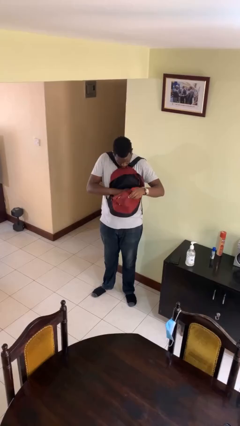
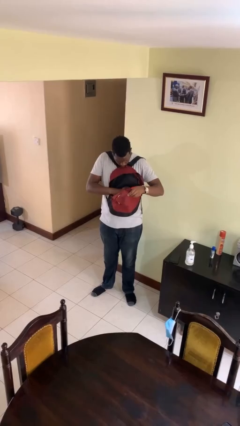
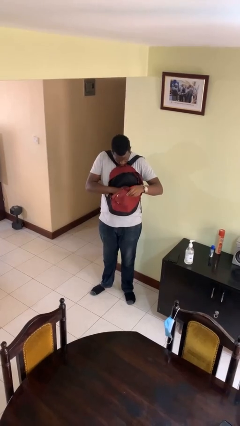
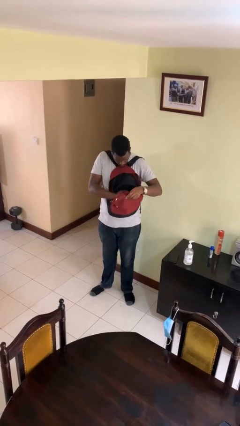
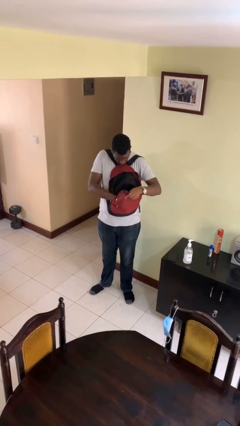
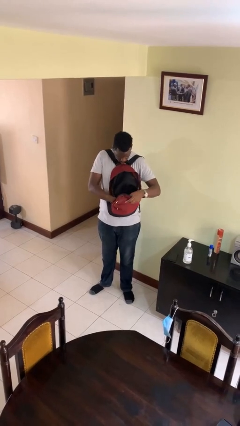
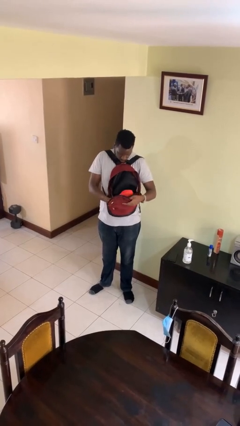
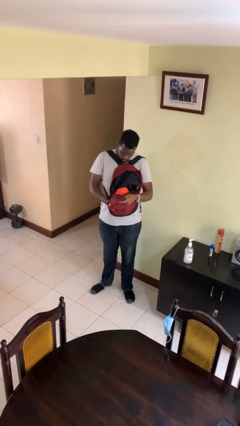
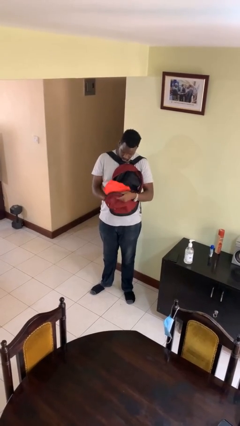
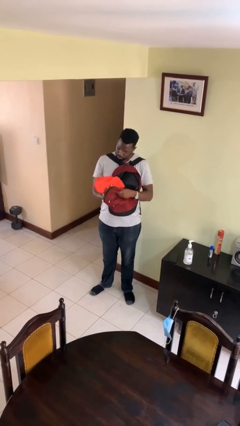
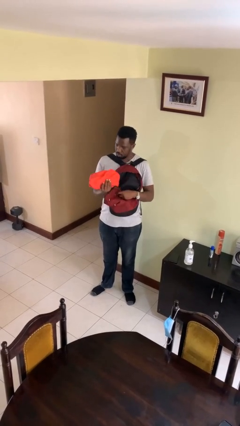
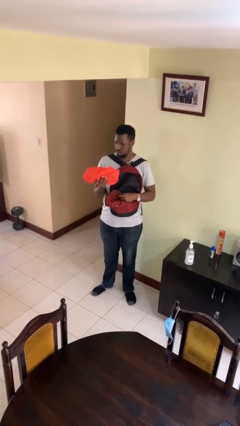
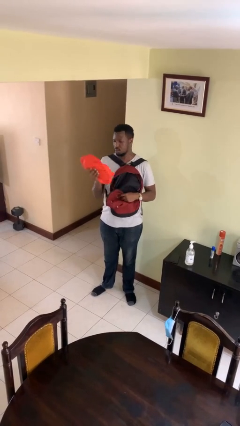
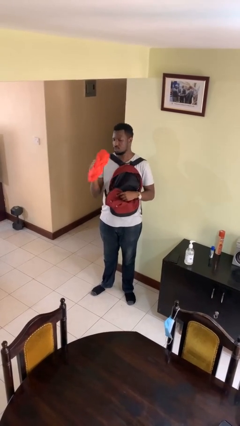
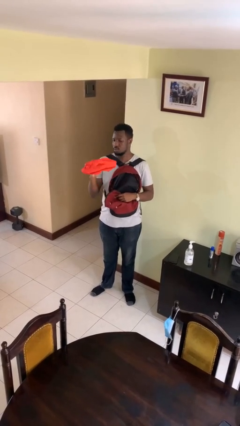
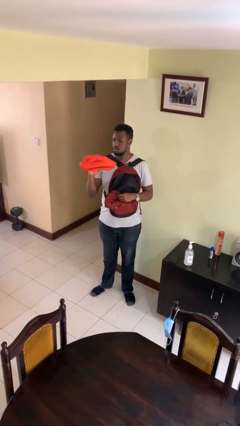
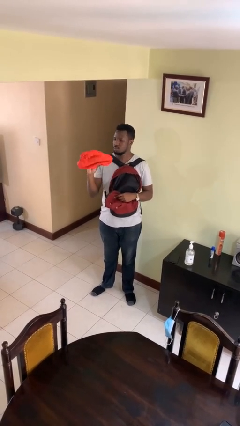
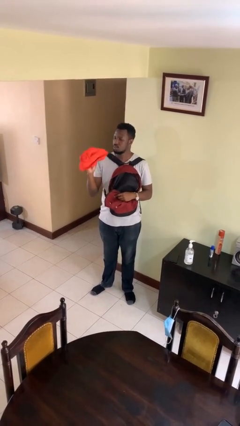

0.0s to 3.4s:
person takes object from backpack

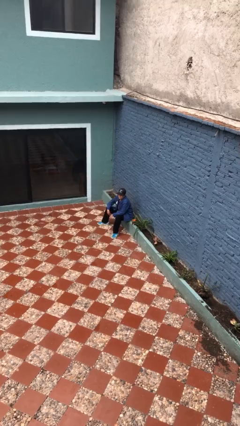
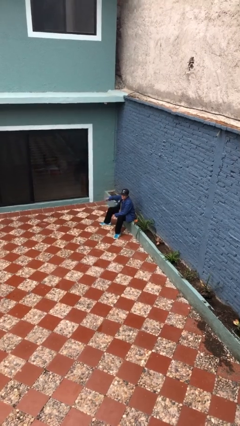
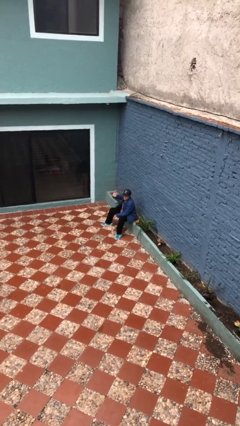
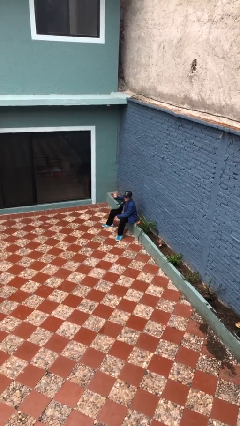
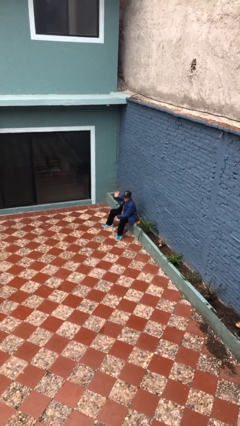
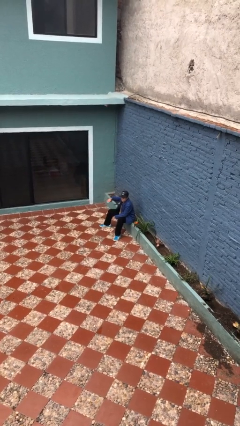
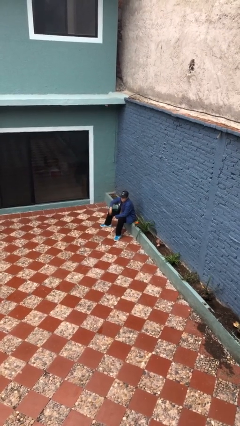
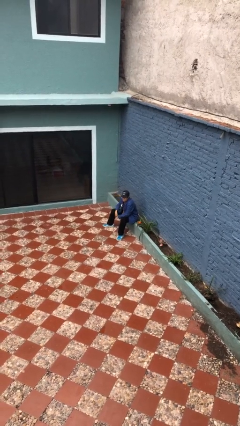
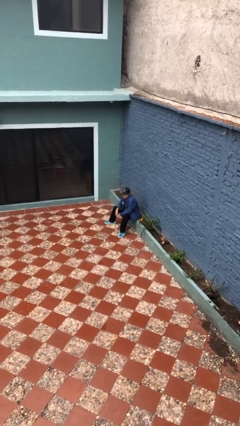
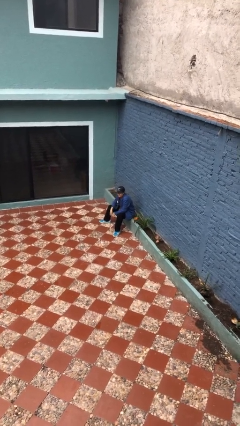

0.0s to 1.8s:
person waves at person

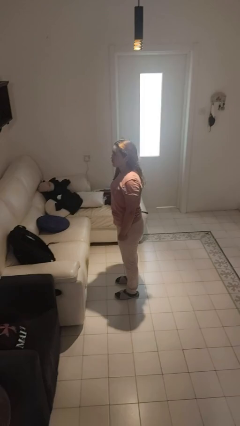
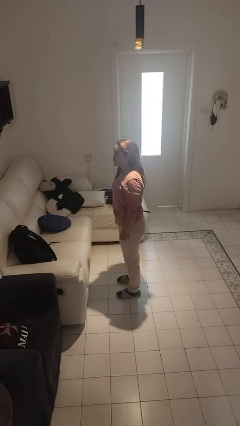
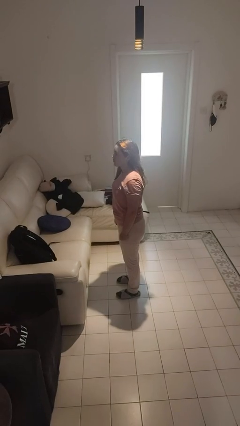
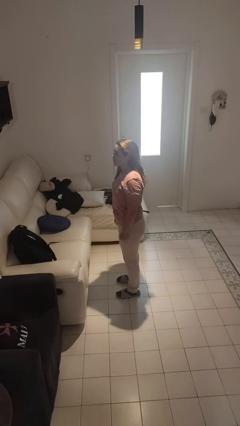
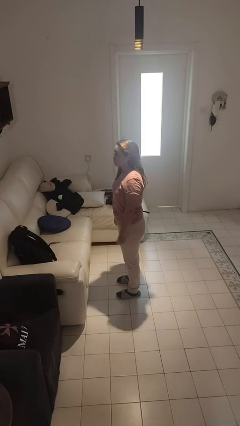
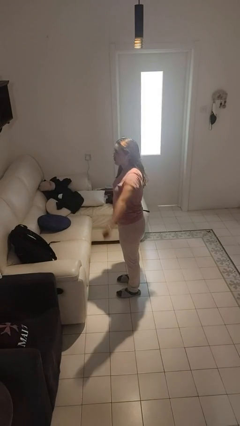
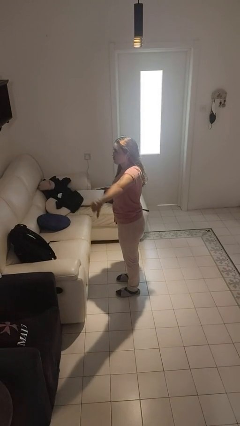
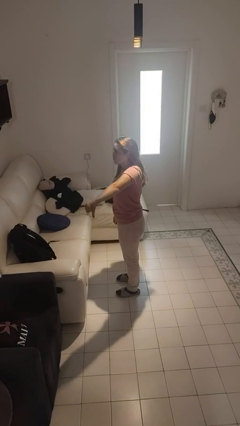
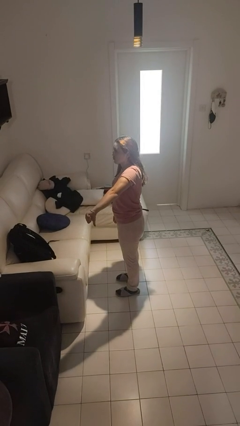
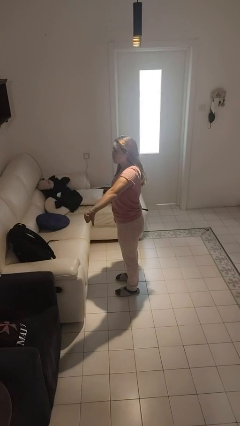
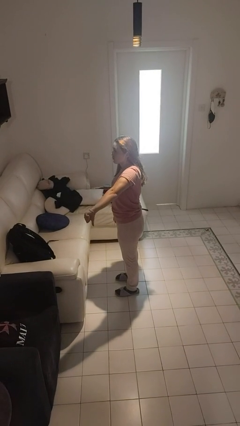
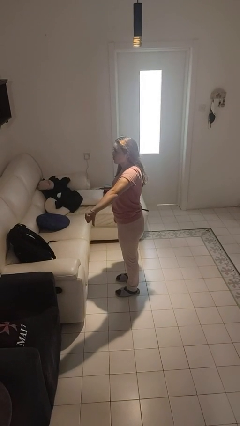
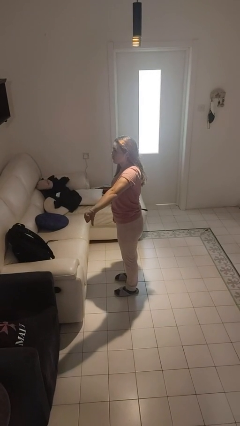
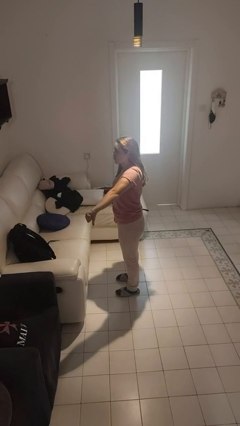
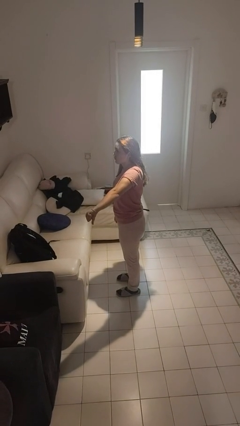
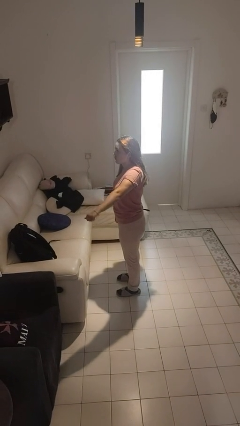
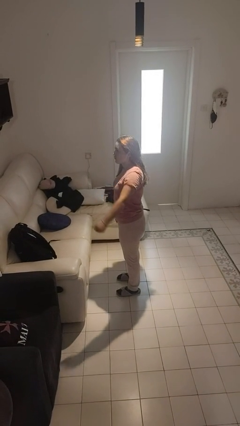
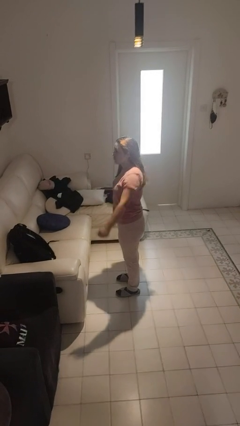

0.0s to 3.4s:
person gestures thumbs down

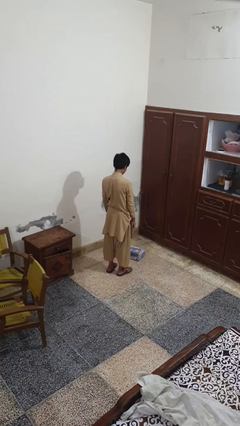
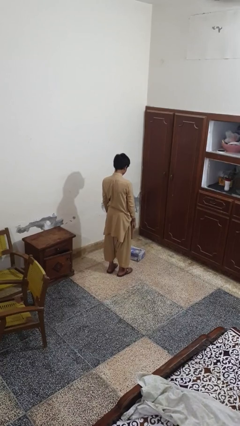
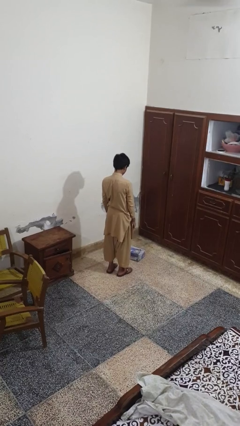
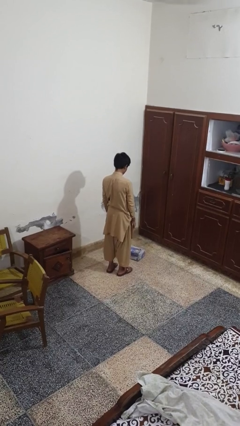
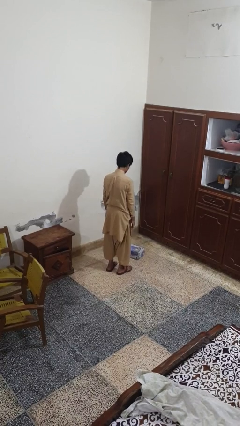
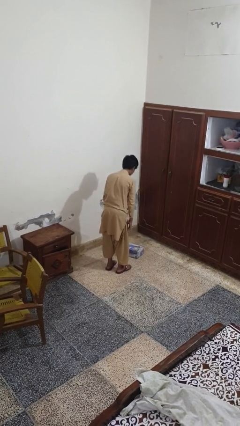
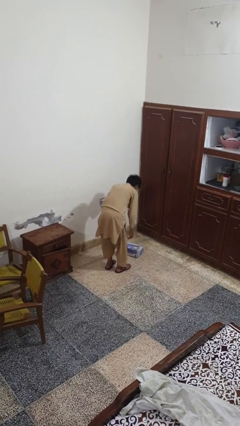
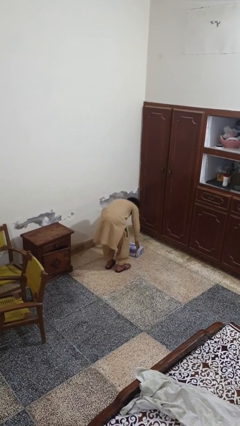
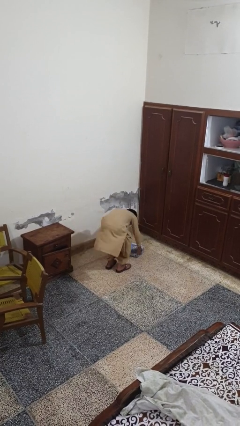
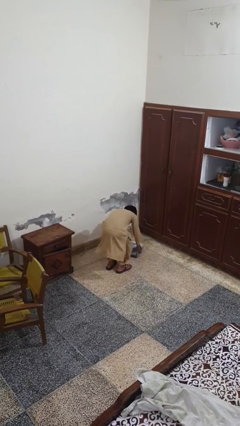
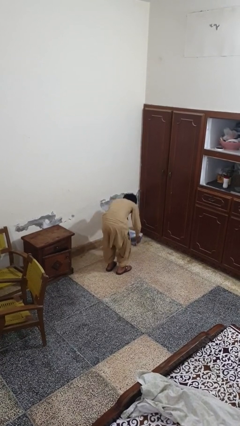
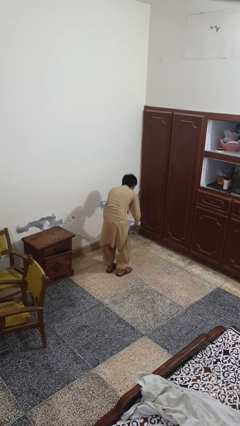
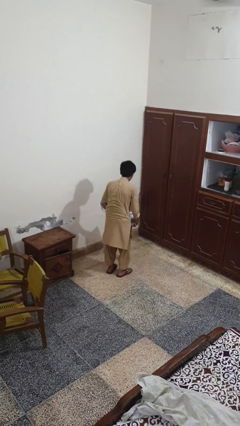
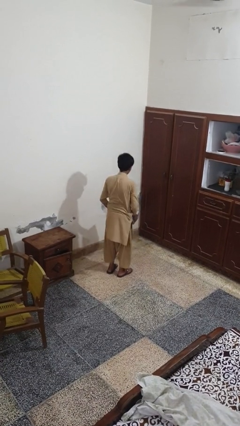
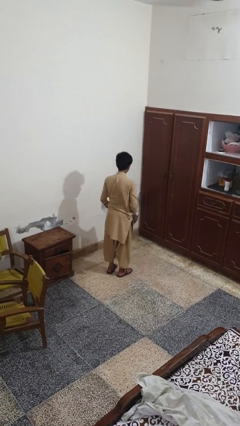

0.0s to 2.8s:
person picks up object from floor

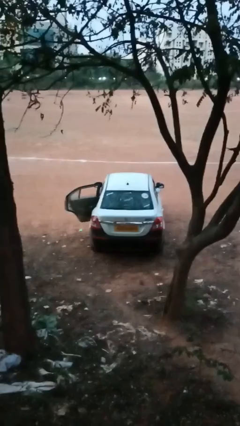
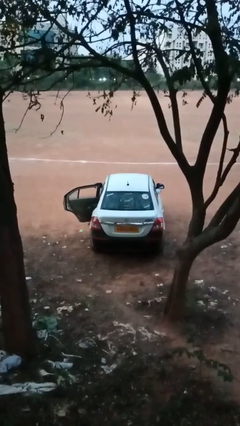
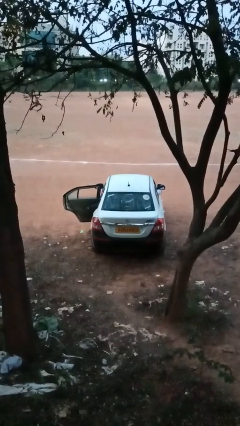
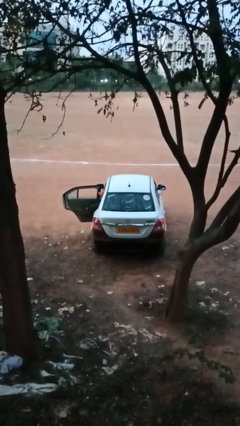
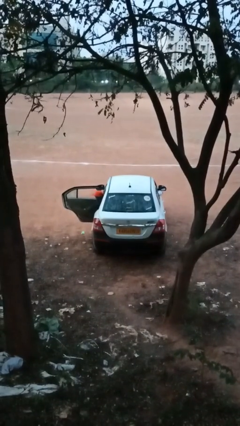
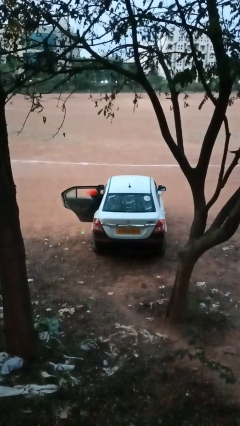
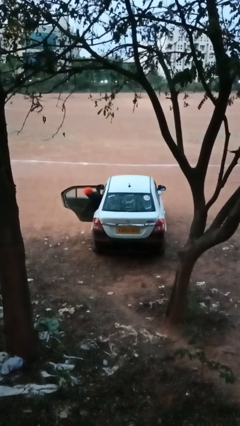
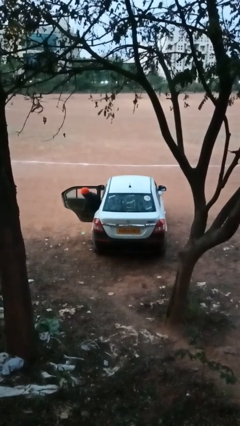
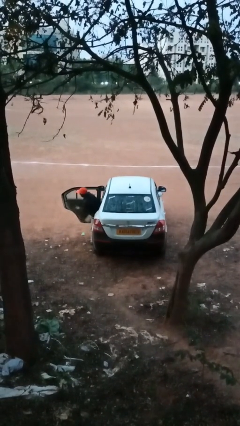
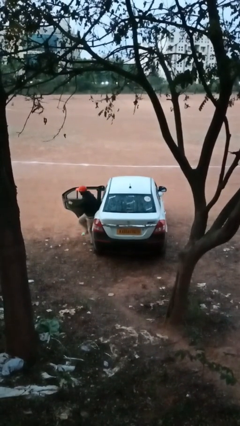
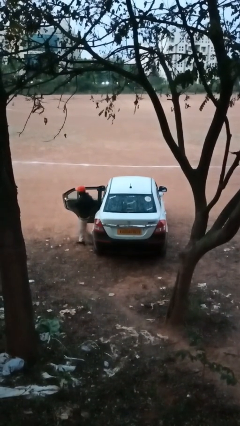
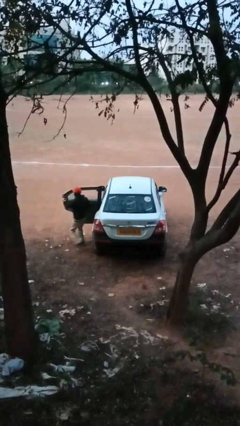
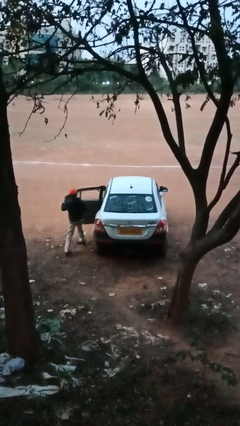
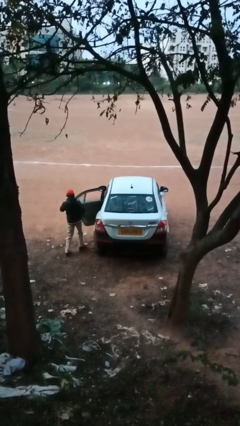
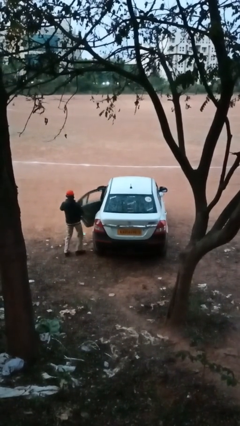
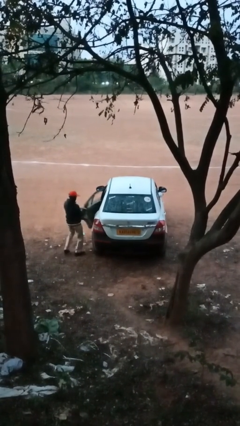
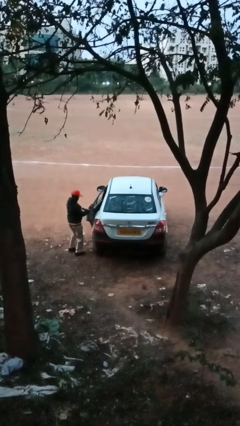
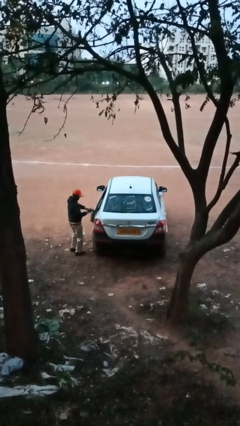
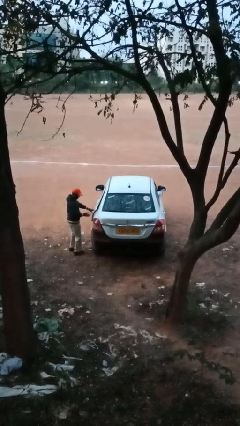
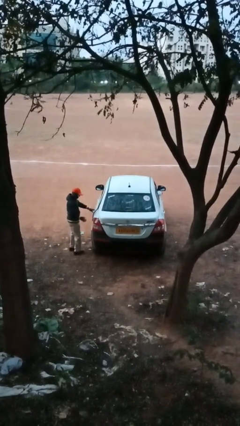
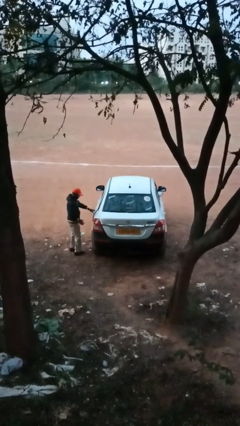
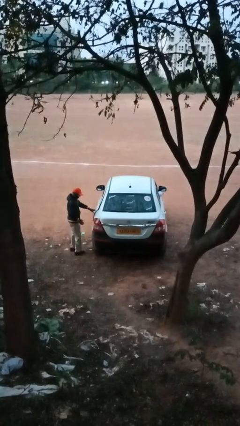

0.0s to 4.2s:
car drops off person

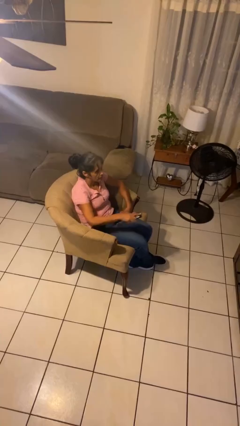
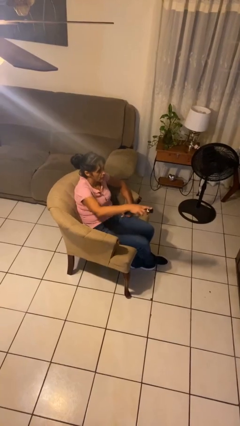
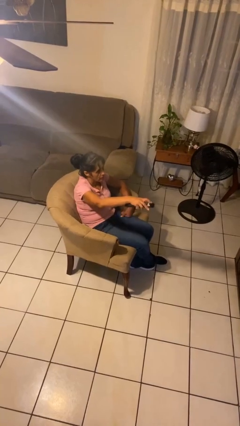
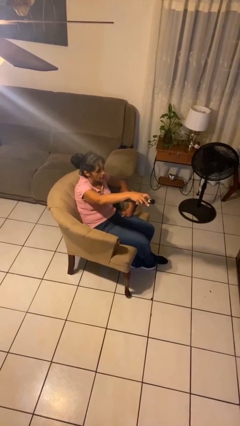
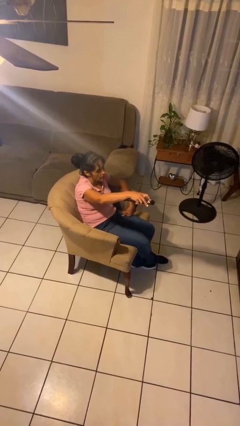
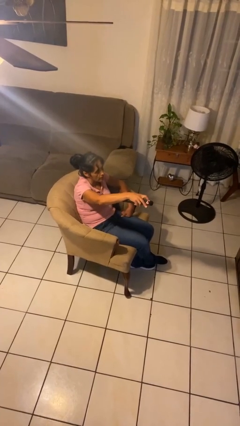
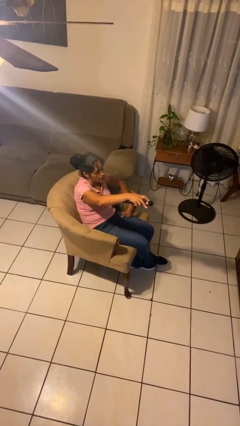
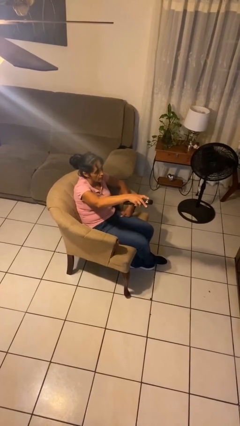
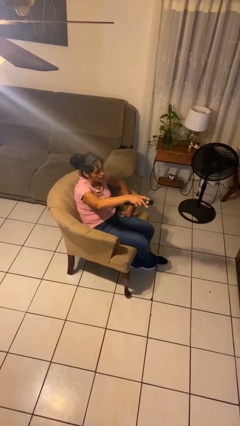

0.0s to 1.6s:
person uses television remote

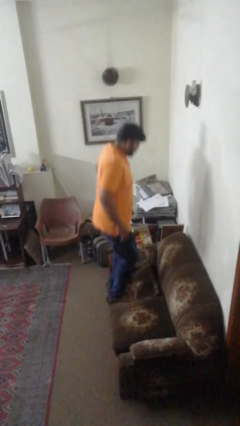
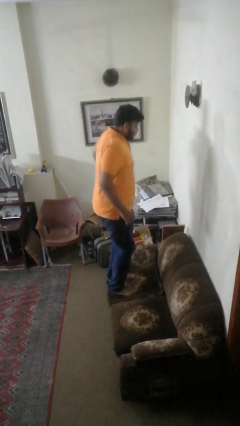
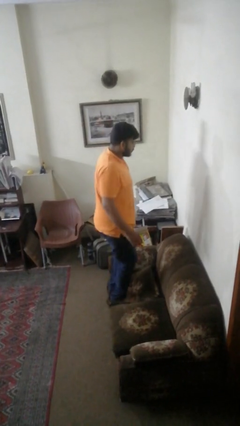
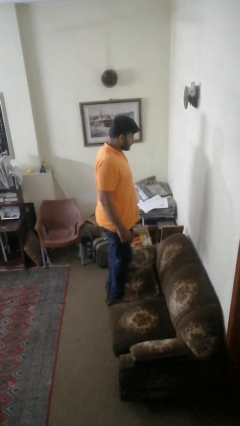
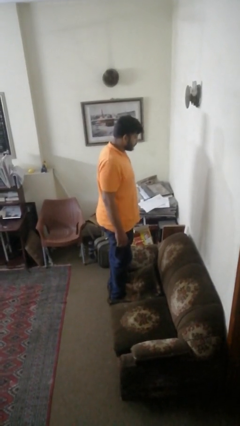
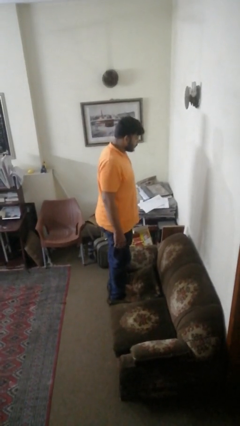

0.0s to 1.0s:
person jumps on couch
